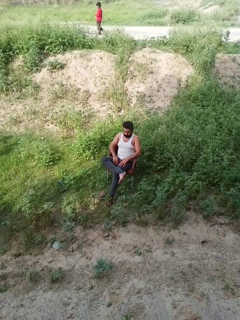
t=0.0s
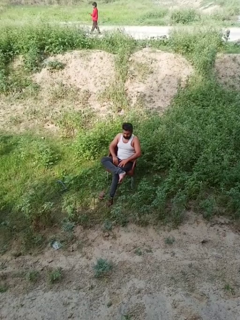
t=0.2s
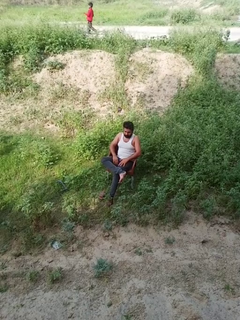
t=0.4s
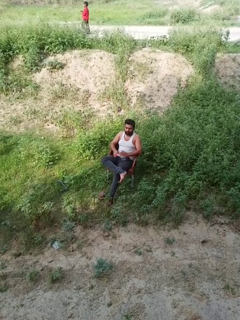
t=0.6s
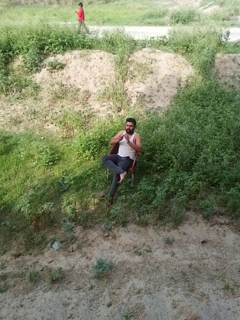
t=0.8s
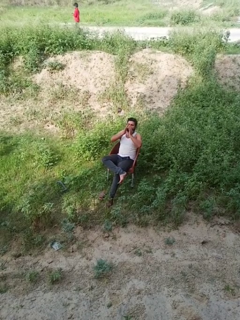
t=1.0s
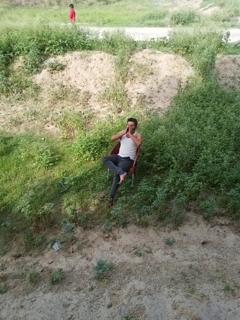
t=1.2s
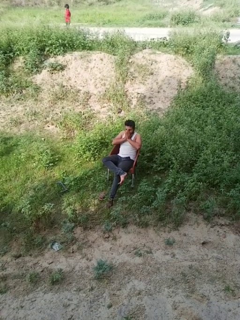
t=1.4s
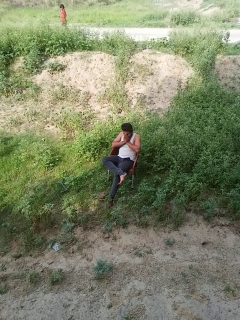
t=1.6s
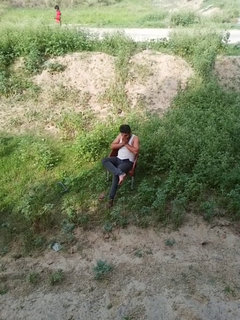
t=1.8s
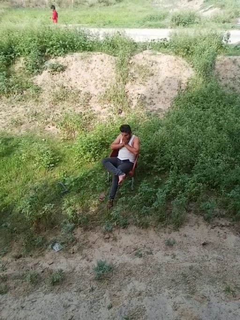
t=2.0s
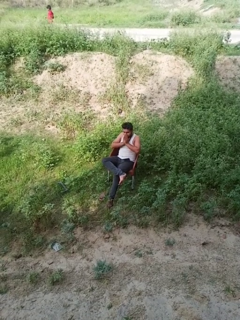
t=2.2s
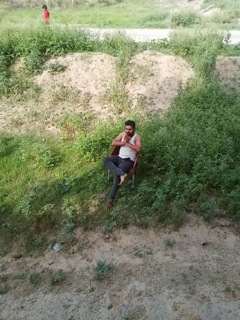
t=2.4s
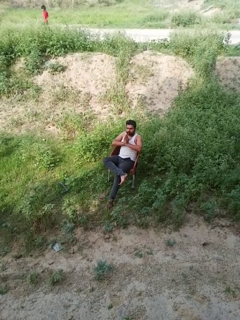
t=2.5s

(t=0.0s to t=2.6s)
person sneezes into hand

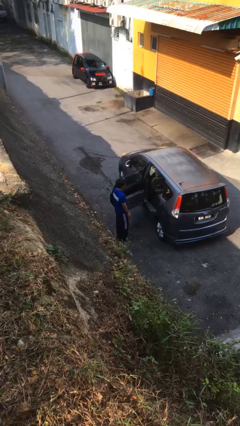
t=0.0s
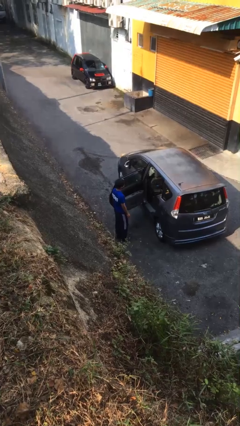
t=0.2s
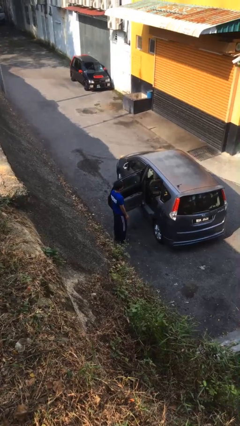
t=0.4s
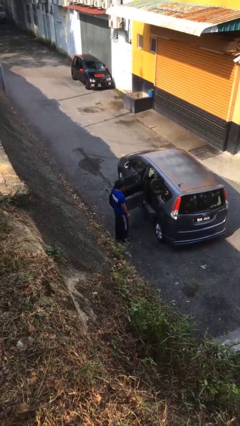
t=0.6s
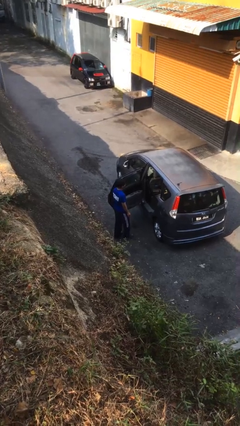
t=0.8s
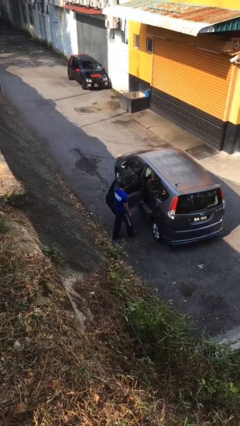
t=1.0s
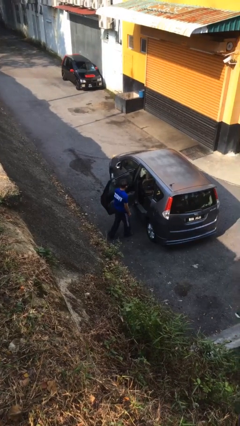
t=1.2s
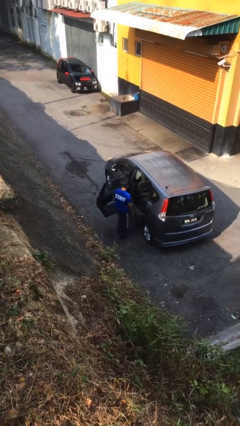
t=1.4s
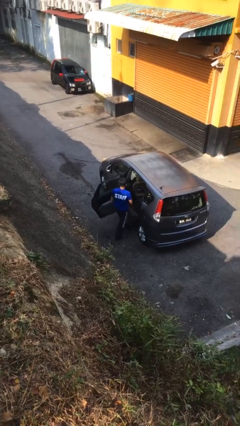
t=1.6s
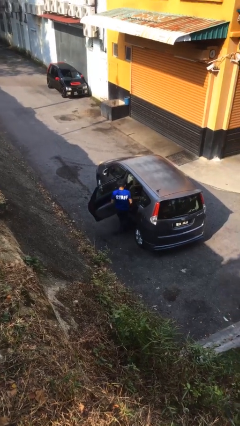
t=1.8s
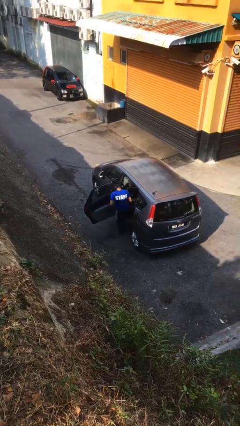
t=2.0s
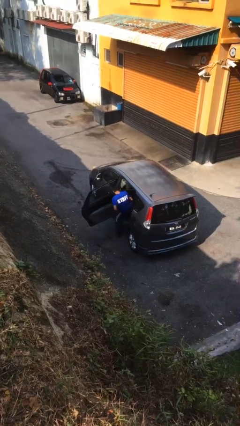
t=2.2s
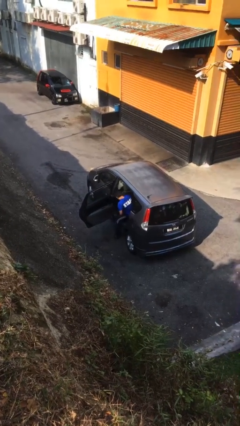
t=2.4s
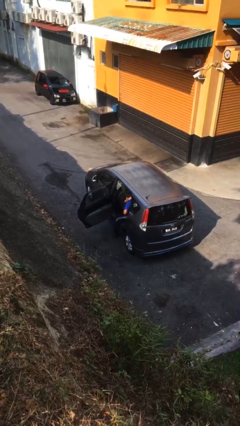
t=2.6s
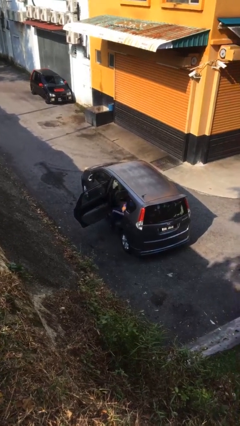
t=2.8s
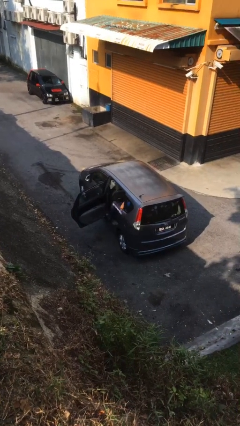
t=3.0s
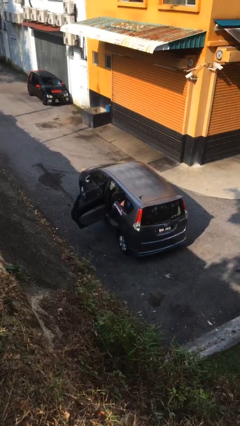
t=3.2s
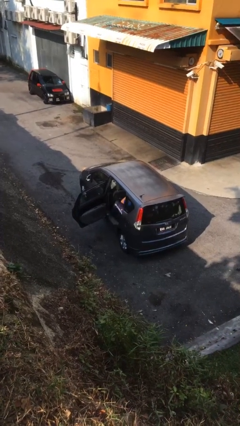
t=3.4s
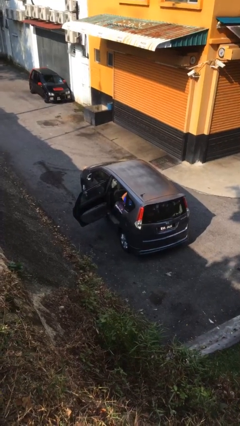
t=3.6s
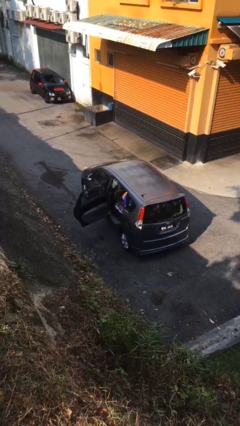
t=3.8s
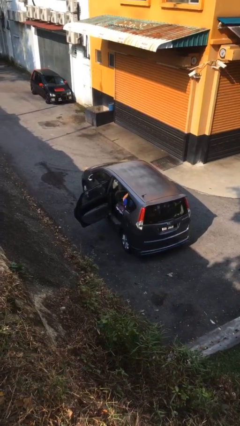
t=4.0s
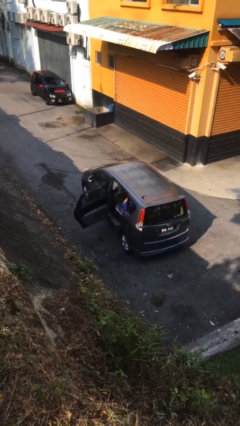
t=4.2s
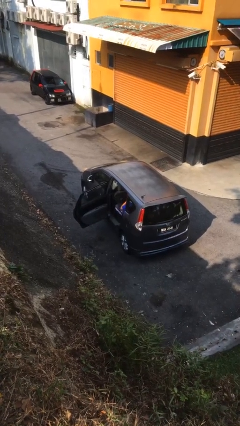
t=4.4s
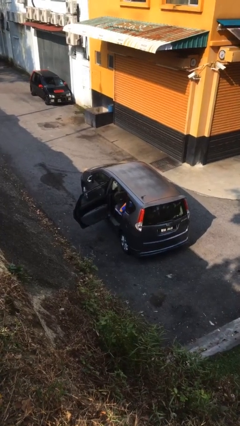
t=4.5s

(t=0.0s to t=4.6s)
person enters car

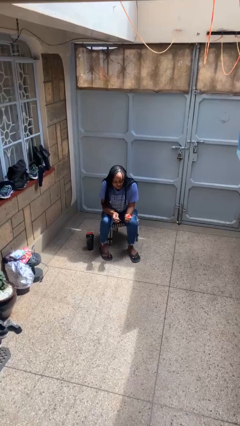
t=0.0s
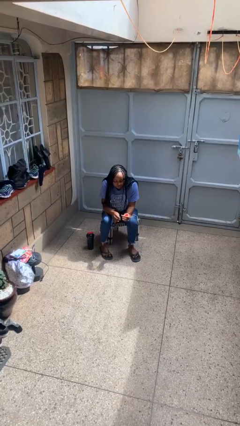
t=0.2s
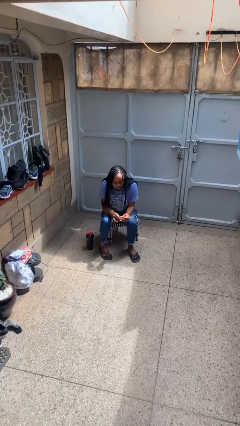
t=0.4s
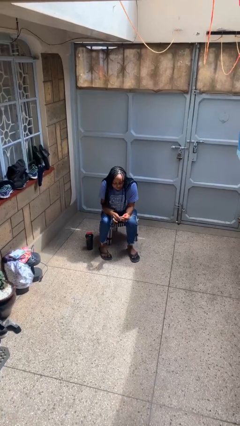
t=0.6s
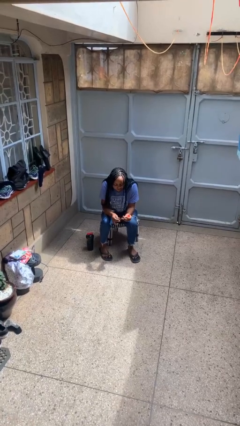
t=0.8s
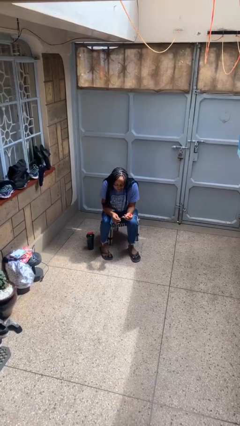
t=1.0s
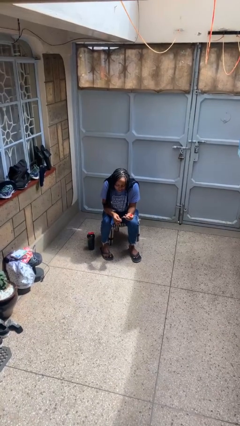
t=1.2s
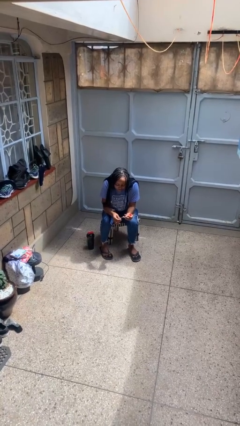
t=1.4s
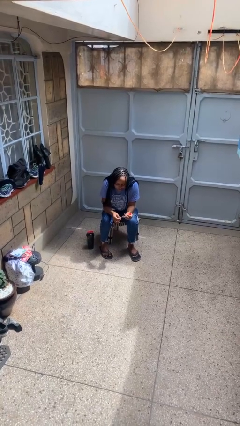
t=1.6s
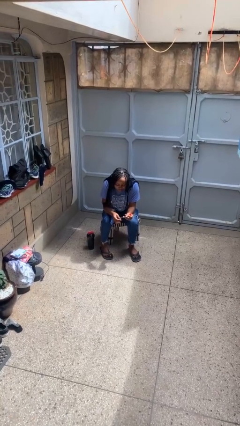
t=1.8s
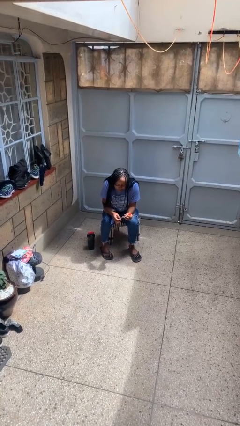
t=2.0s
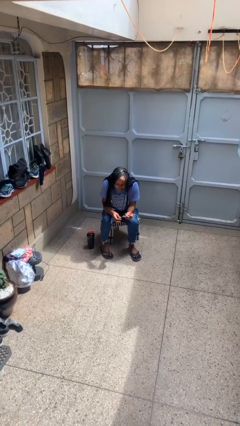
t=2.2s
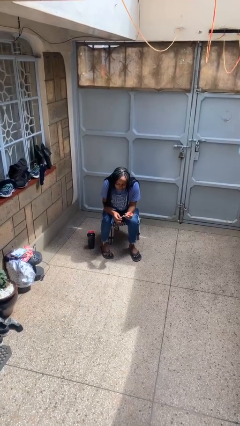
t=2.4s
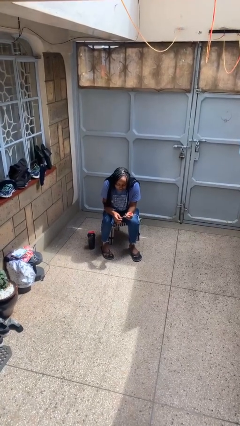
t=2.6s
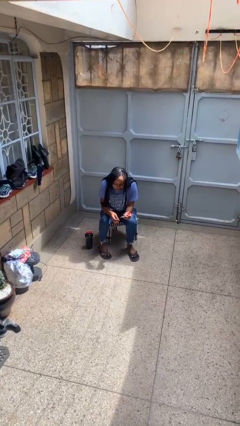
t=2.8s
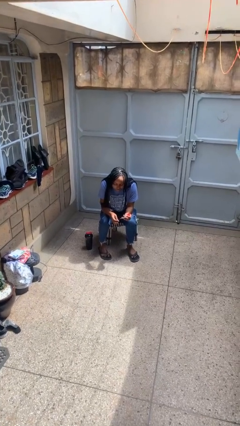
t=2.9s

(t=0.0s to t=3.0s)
person paints fingernails

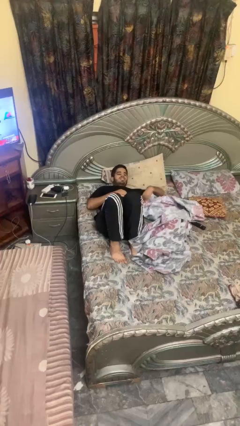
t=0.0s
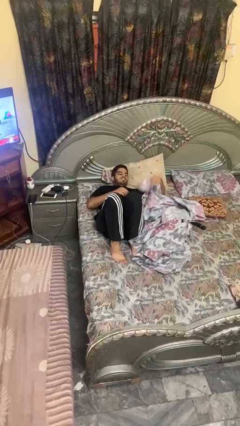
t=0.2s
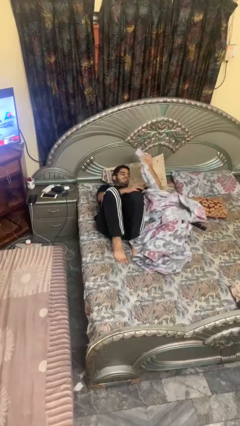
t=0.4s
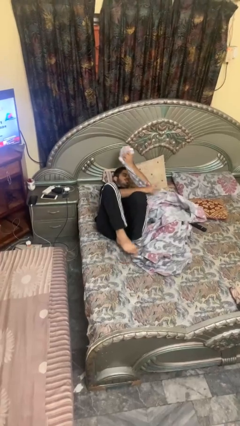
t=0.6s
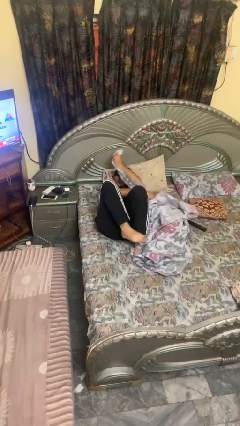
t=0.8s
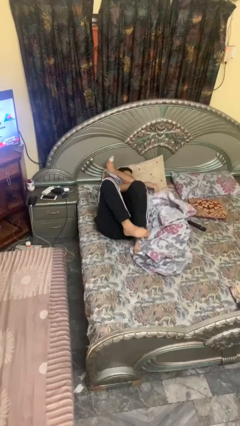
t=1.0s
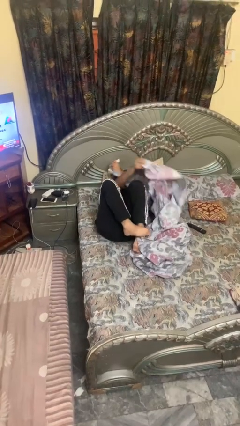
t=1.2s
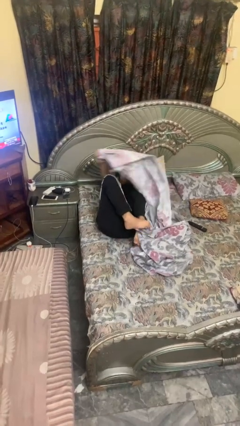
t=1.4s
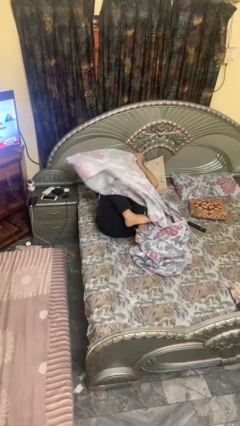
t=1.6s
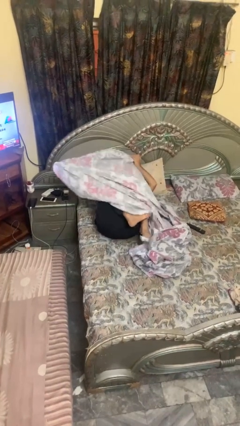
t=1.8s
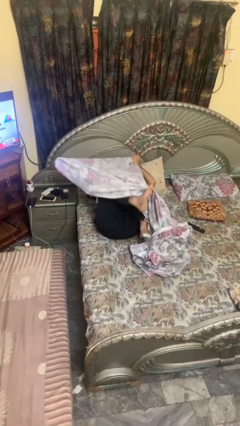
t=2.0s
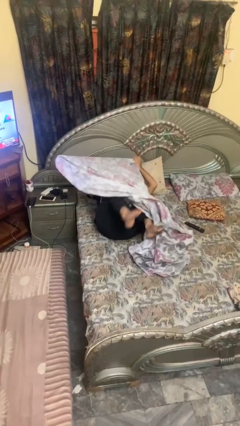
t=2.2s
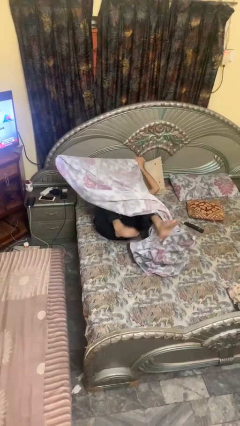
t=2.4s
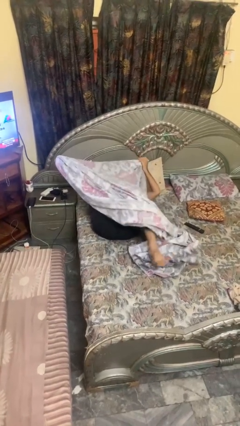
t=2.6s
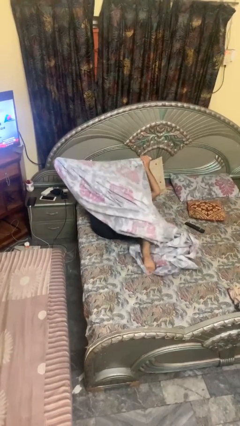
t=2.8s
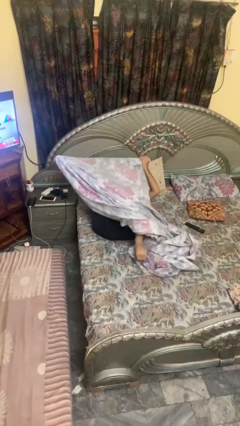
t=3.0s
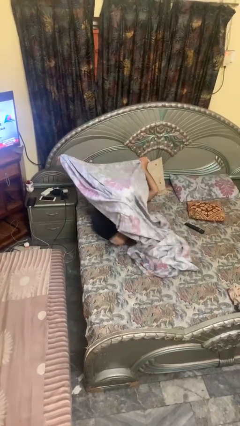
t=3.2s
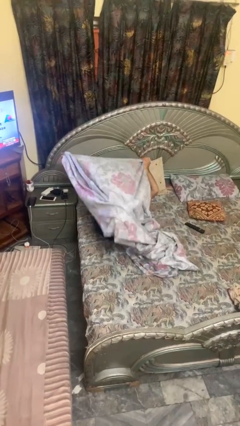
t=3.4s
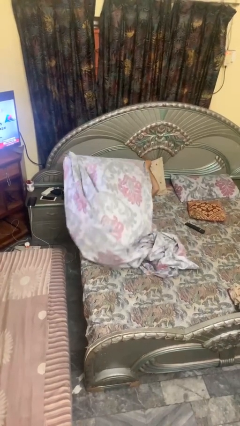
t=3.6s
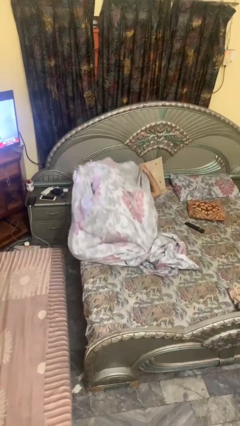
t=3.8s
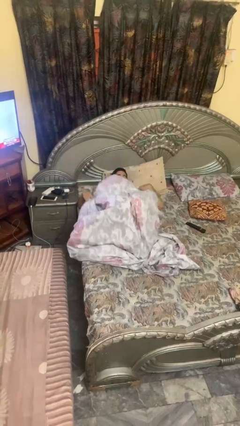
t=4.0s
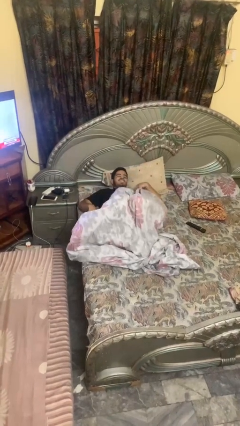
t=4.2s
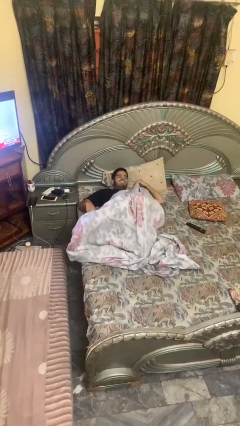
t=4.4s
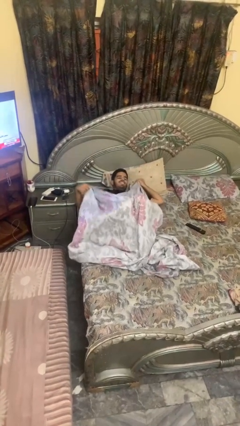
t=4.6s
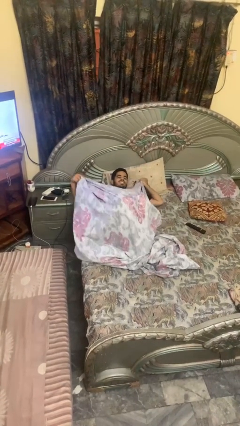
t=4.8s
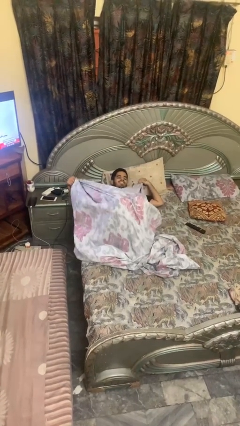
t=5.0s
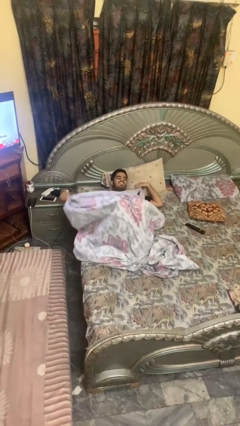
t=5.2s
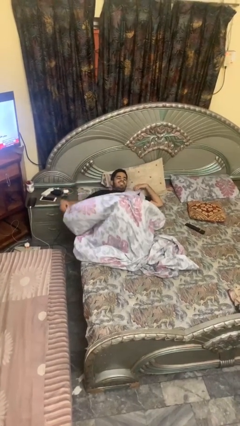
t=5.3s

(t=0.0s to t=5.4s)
person covers with bedsheets

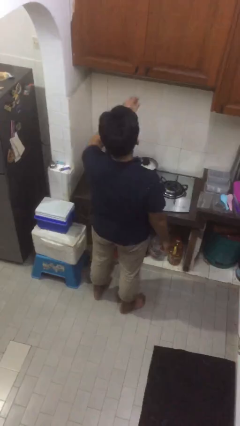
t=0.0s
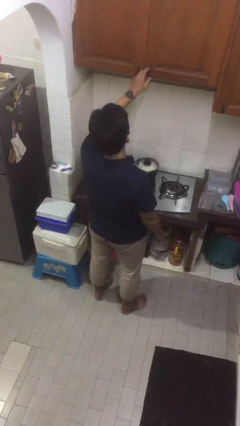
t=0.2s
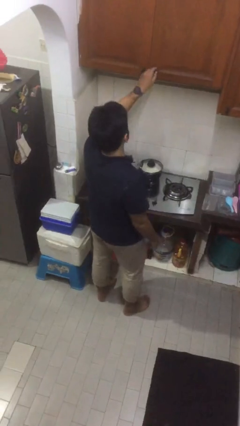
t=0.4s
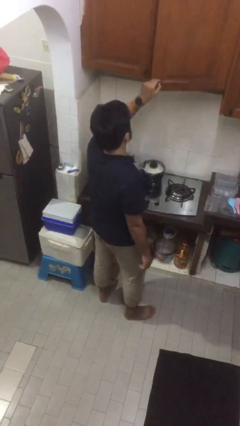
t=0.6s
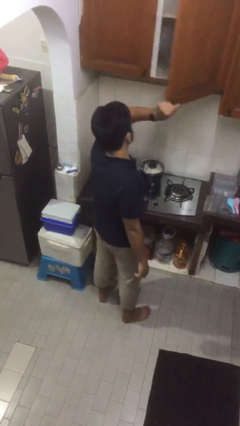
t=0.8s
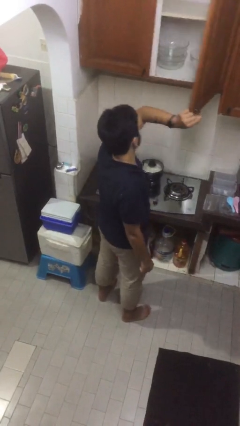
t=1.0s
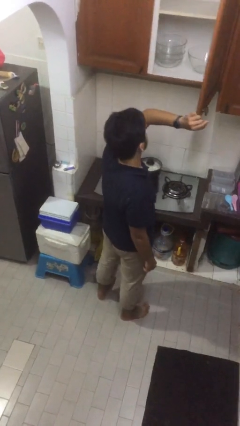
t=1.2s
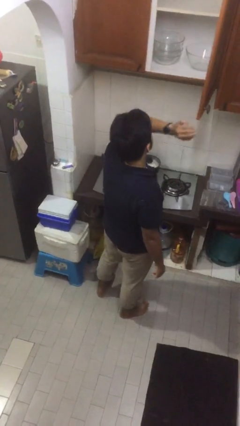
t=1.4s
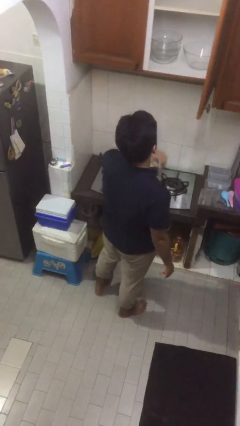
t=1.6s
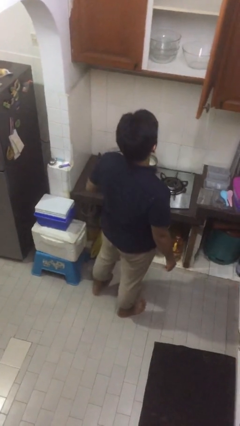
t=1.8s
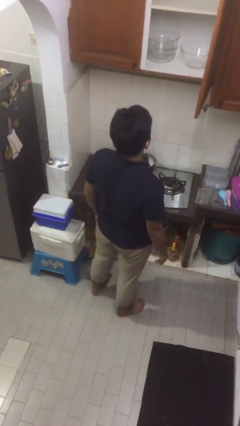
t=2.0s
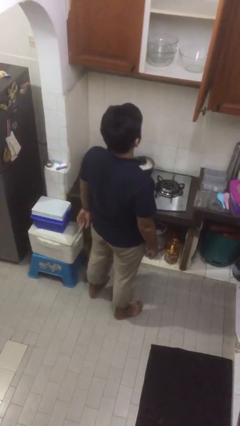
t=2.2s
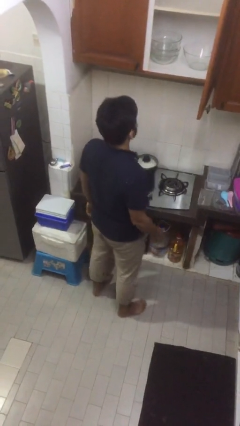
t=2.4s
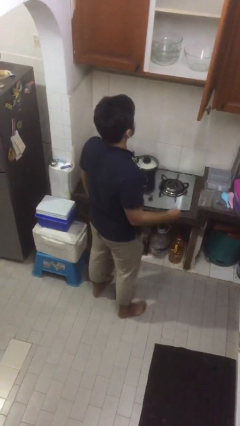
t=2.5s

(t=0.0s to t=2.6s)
person opens cabinet
